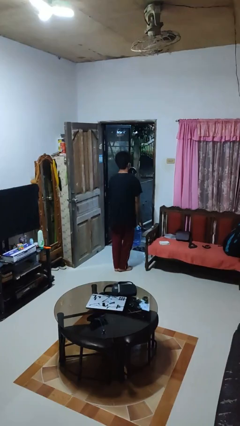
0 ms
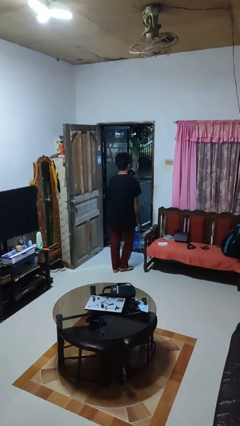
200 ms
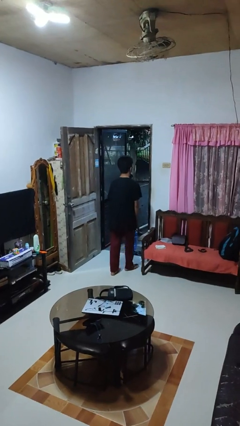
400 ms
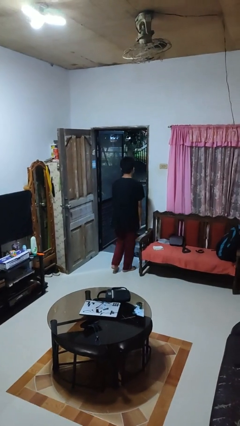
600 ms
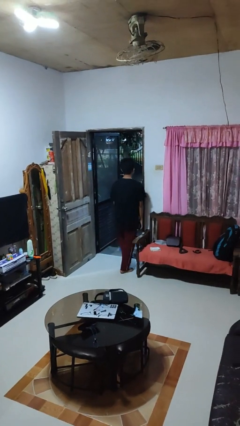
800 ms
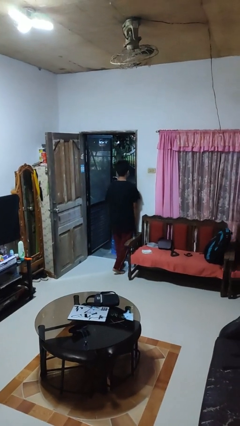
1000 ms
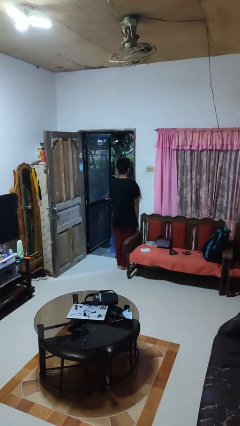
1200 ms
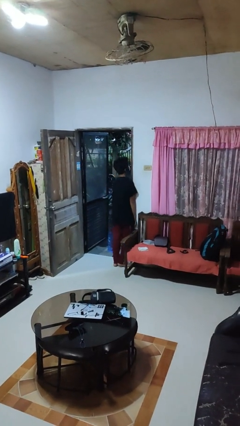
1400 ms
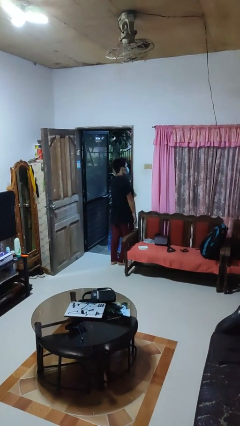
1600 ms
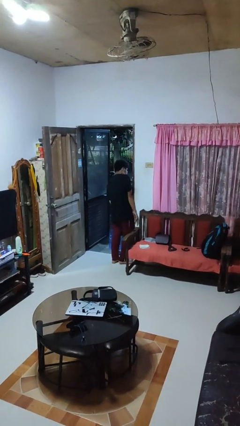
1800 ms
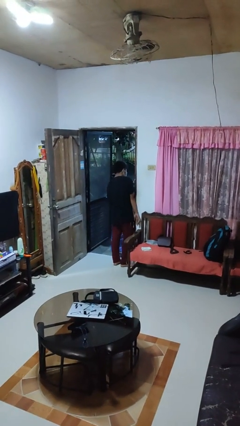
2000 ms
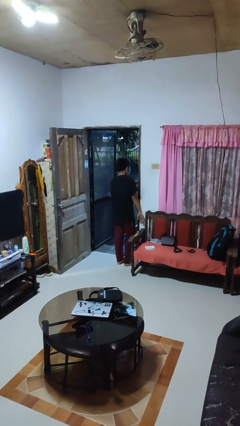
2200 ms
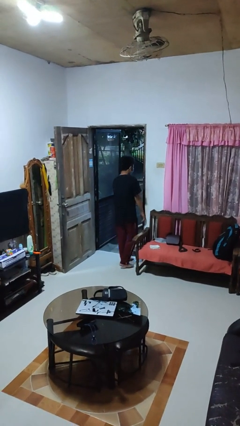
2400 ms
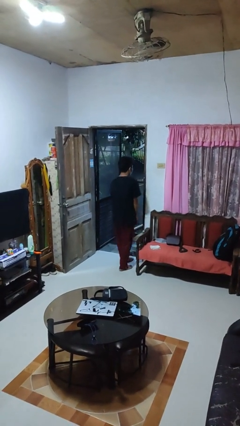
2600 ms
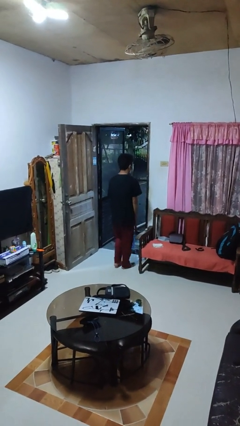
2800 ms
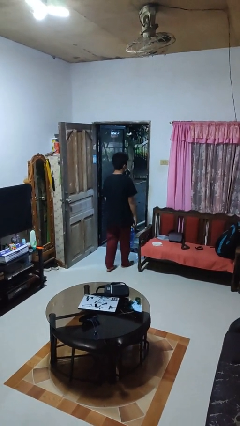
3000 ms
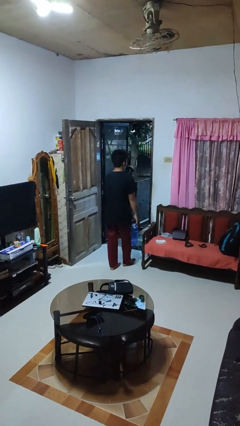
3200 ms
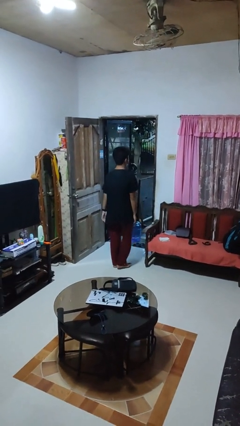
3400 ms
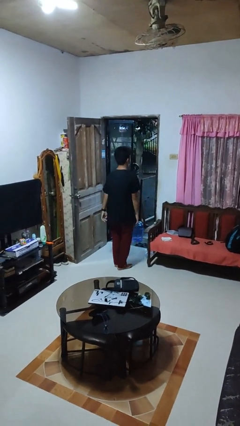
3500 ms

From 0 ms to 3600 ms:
person bumps into wall

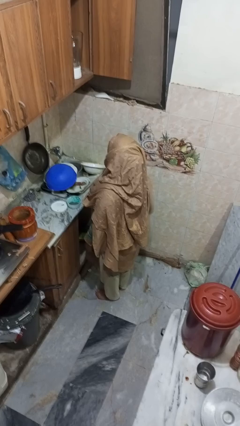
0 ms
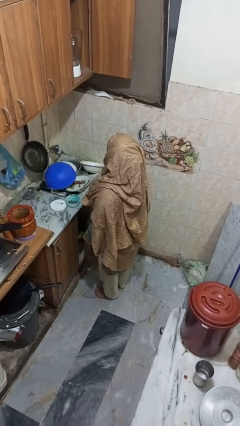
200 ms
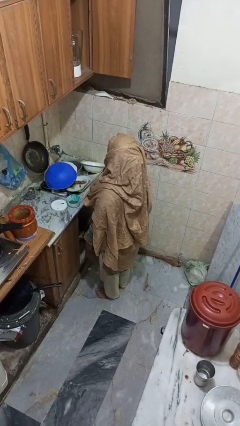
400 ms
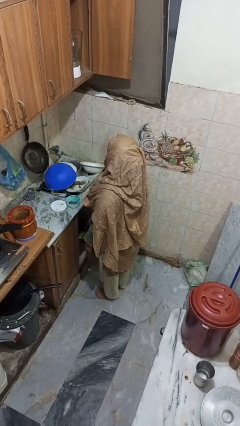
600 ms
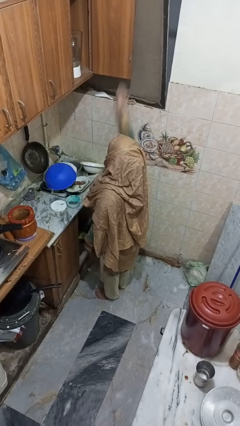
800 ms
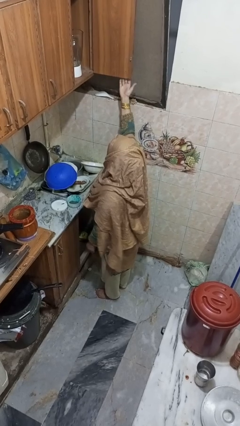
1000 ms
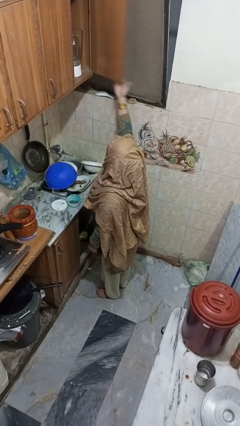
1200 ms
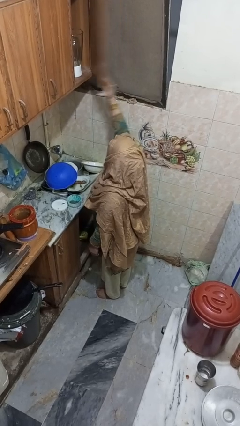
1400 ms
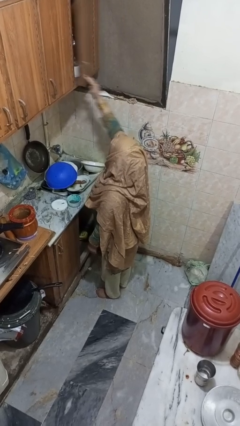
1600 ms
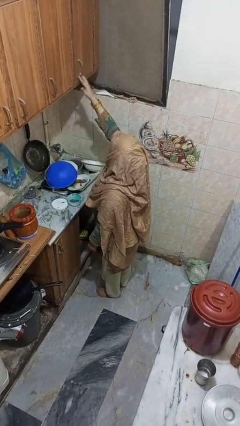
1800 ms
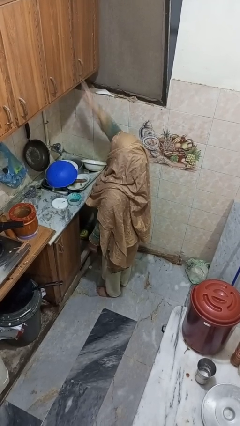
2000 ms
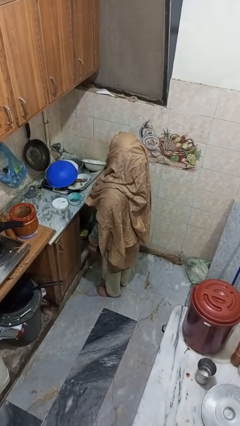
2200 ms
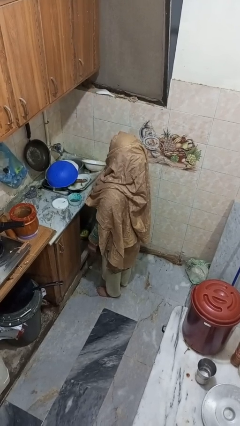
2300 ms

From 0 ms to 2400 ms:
person closes cabinet

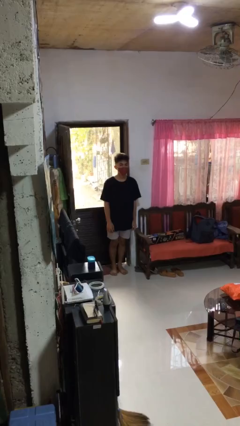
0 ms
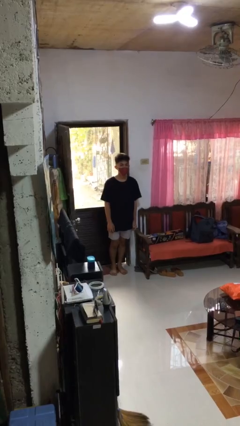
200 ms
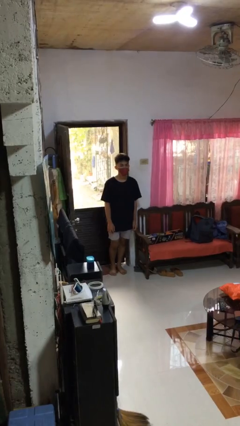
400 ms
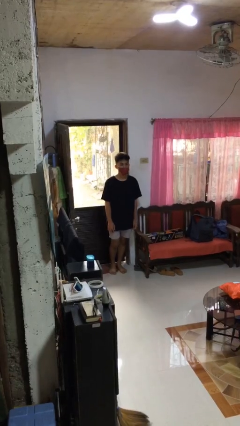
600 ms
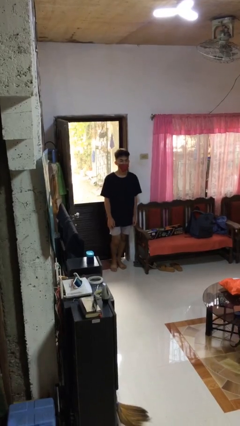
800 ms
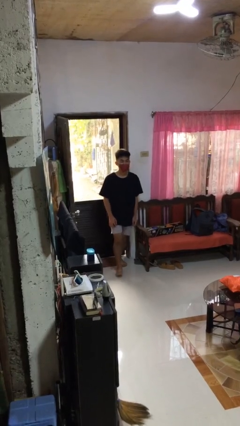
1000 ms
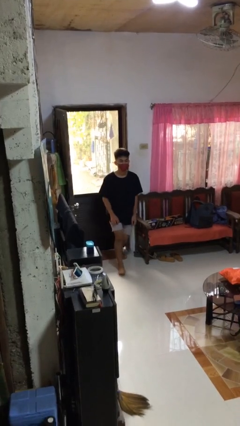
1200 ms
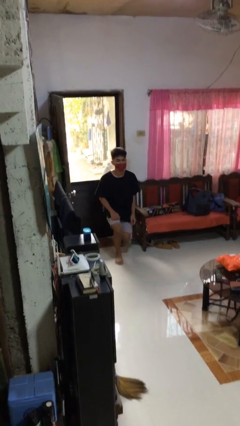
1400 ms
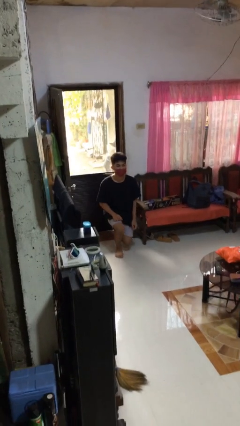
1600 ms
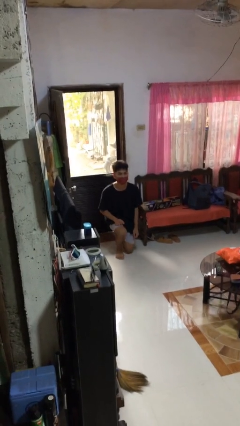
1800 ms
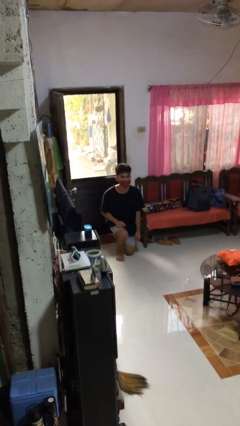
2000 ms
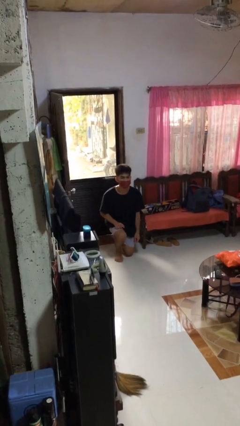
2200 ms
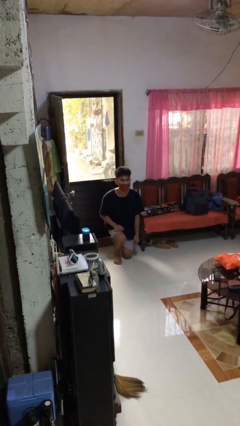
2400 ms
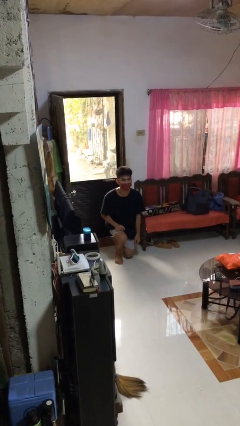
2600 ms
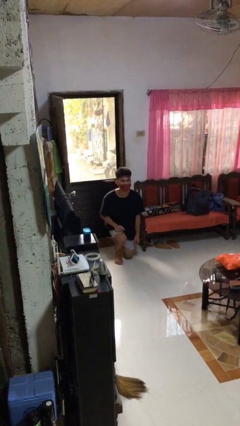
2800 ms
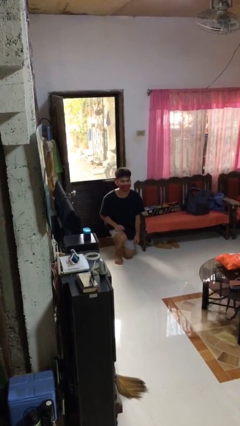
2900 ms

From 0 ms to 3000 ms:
person kneels

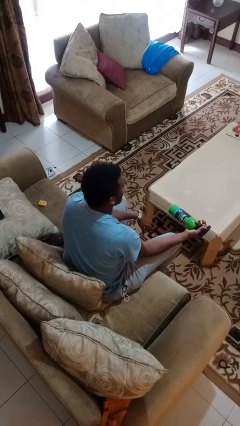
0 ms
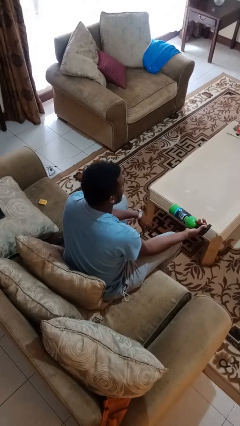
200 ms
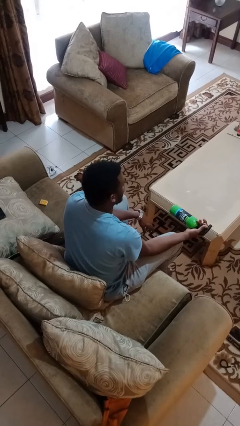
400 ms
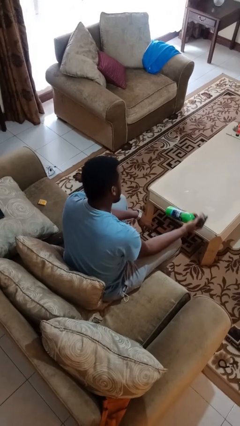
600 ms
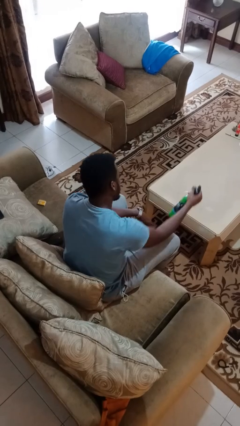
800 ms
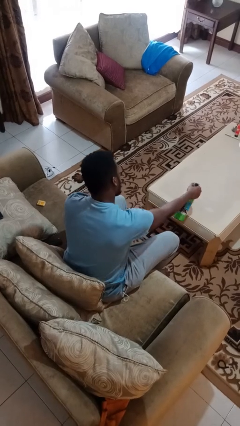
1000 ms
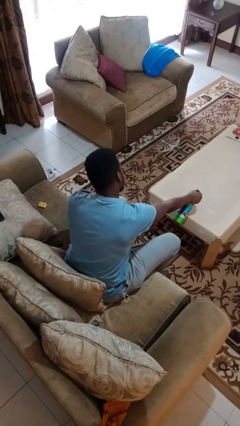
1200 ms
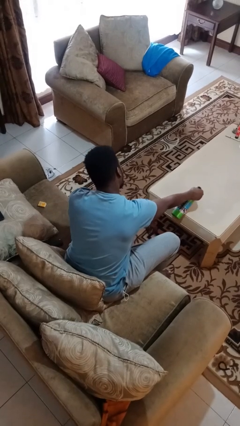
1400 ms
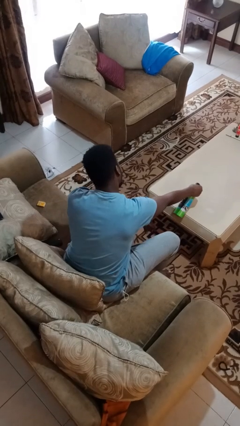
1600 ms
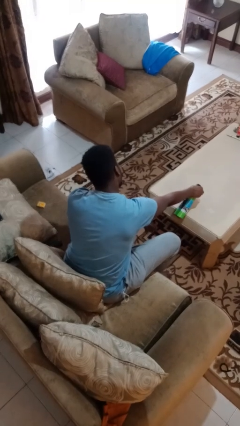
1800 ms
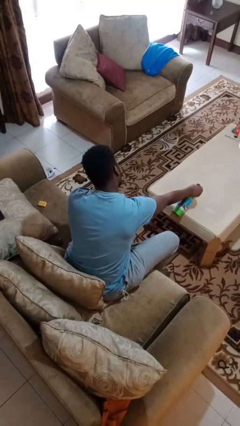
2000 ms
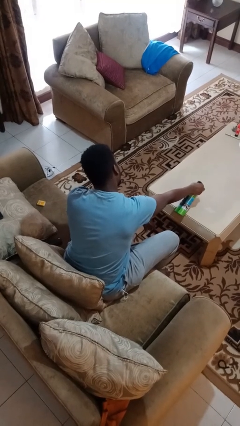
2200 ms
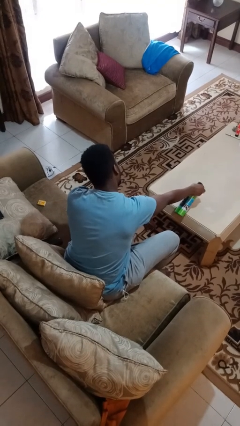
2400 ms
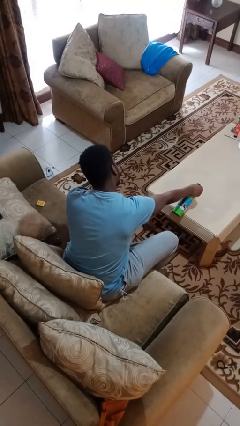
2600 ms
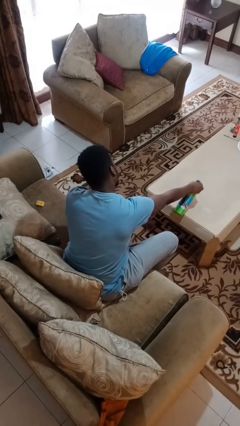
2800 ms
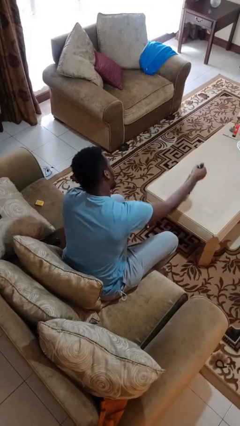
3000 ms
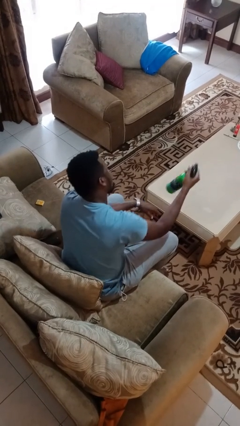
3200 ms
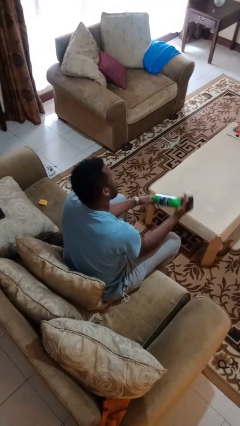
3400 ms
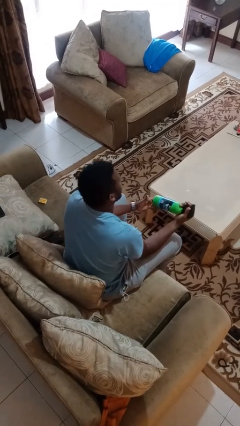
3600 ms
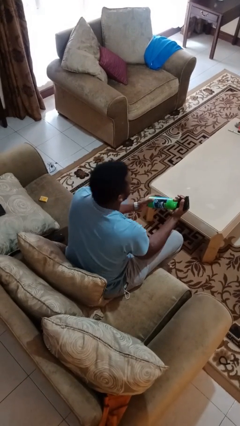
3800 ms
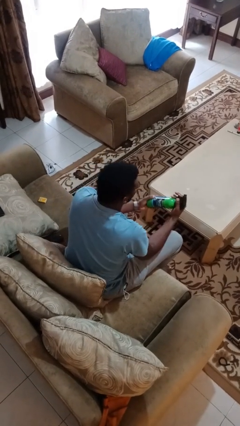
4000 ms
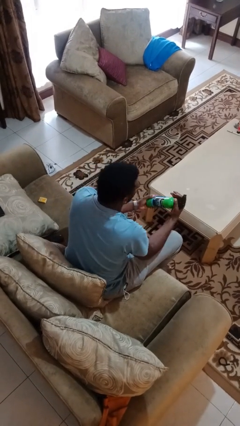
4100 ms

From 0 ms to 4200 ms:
person sprays from bottle

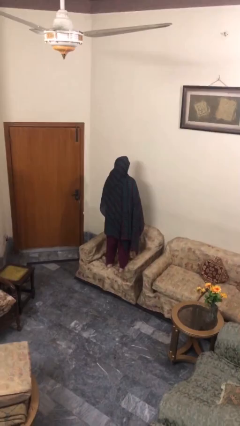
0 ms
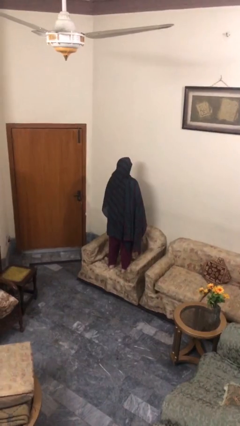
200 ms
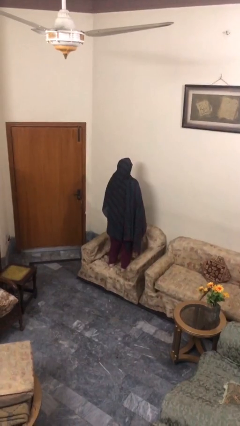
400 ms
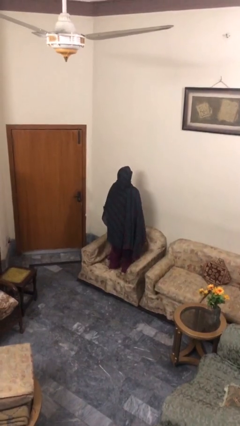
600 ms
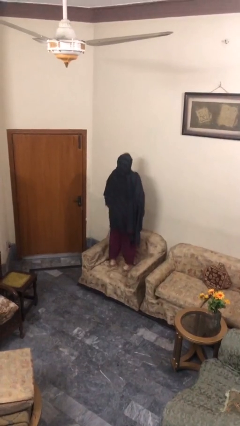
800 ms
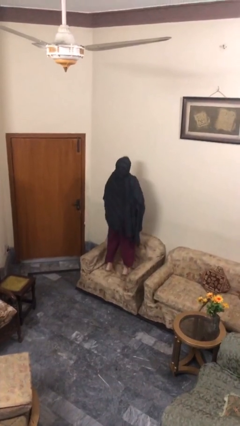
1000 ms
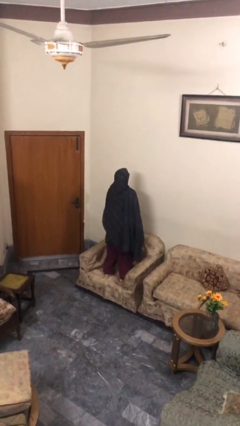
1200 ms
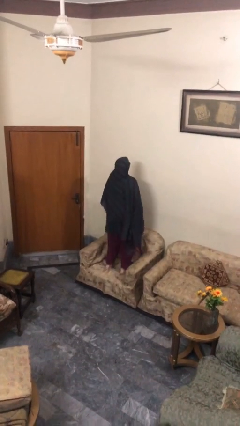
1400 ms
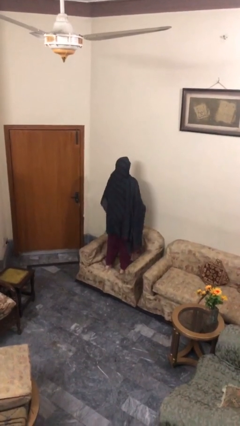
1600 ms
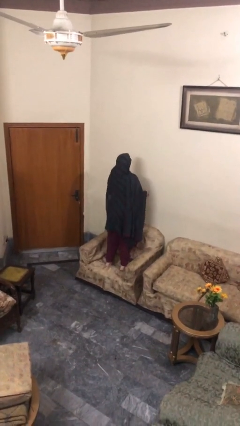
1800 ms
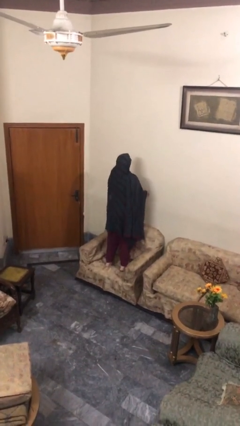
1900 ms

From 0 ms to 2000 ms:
person jumps on couch

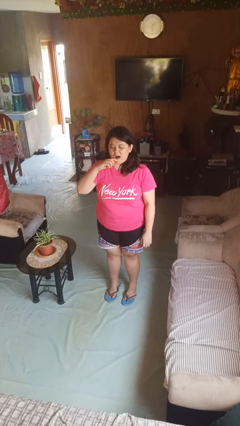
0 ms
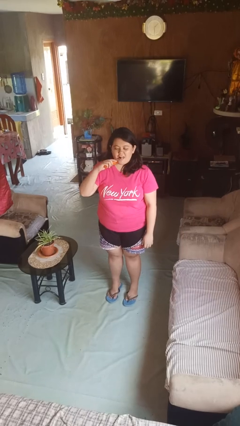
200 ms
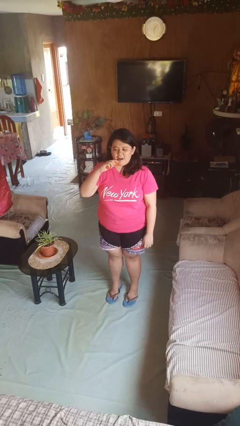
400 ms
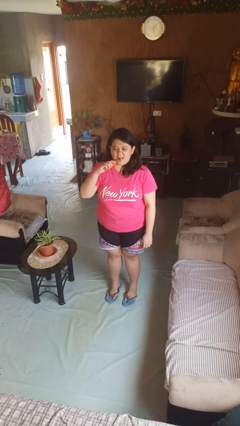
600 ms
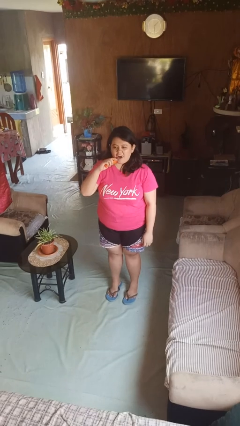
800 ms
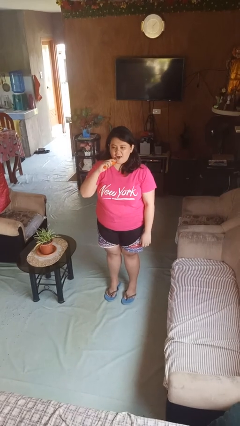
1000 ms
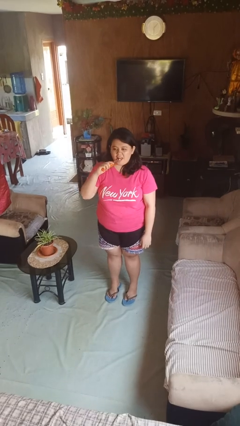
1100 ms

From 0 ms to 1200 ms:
person brushes teeth

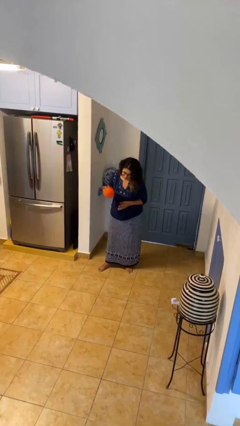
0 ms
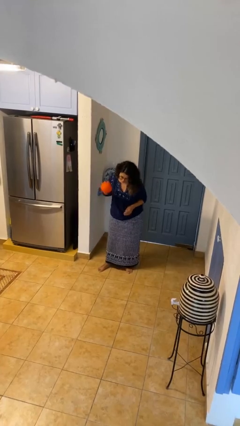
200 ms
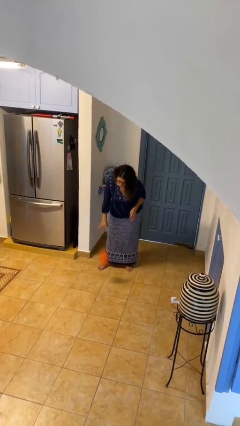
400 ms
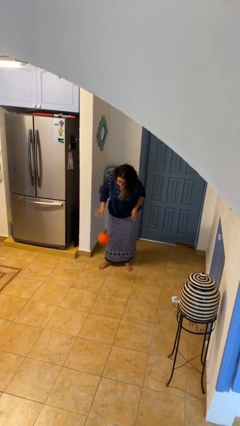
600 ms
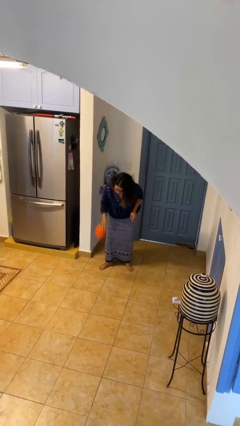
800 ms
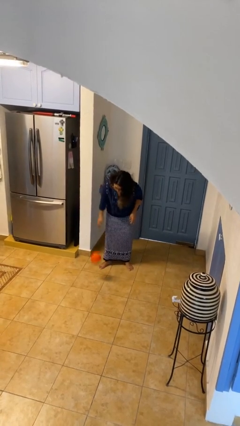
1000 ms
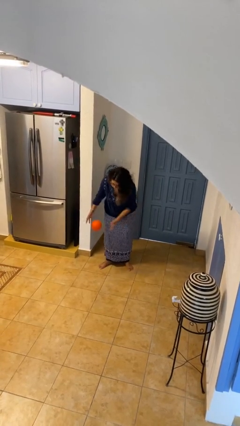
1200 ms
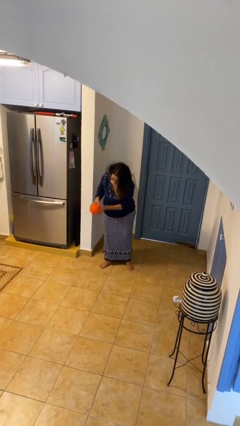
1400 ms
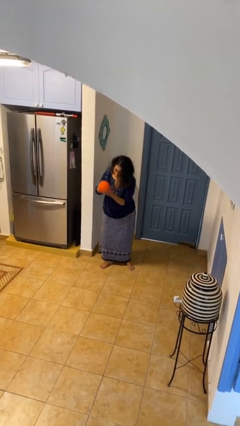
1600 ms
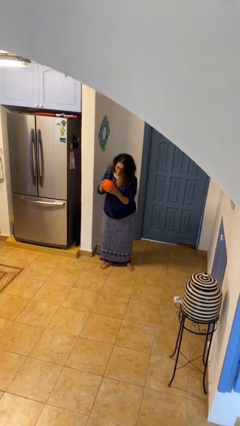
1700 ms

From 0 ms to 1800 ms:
person bounces ball on floor
